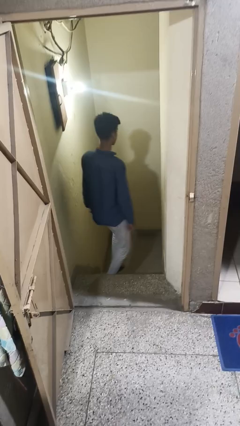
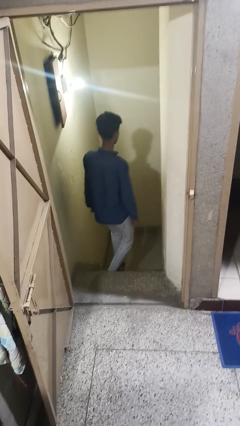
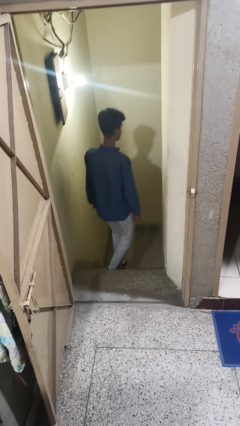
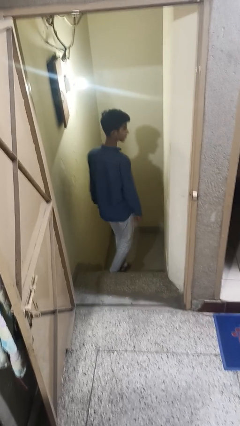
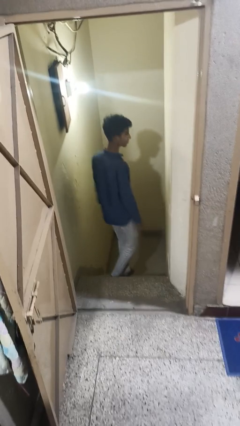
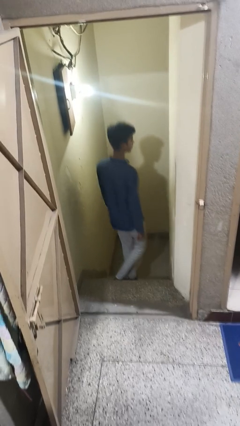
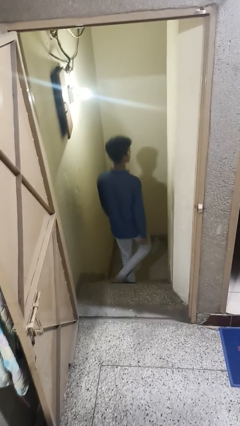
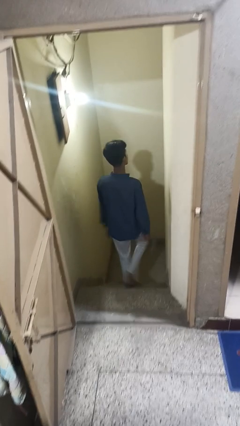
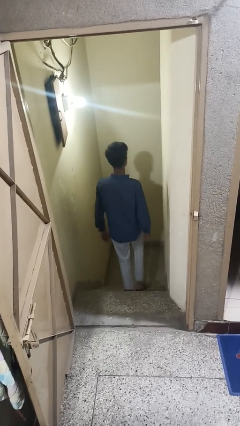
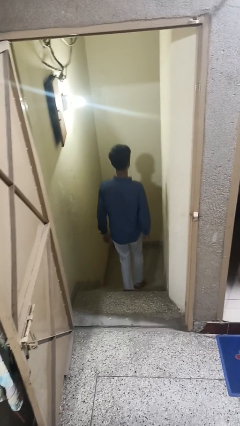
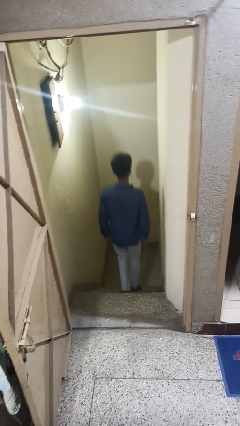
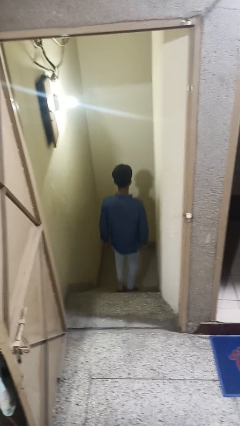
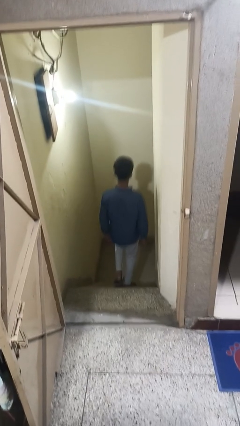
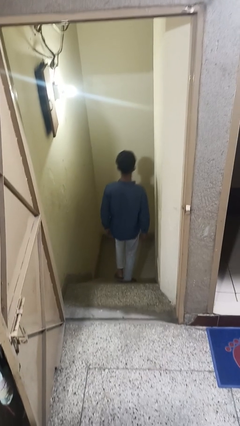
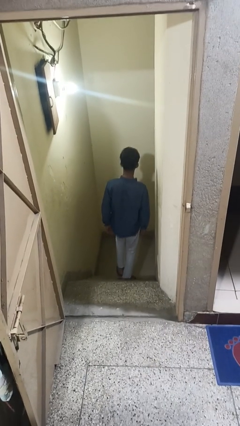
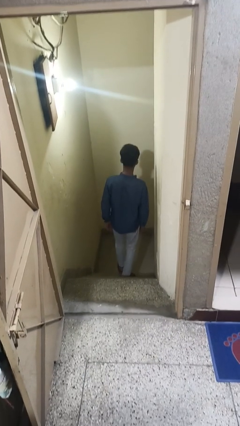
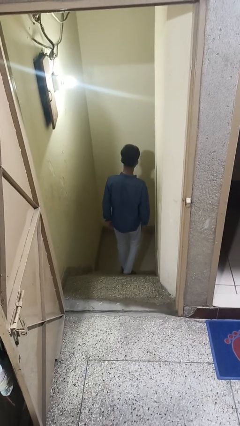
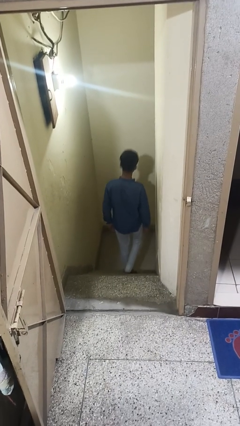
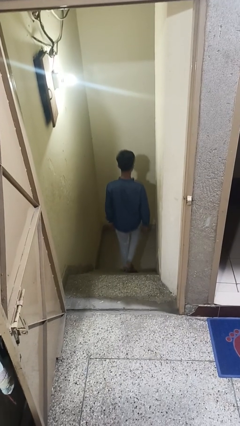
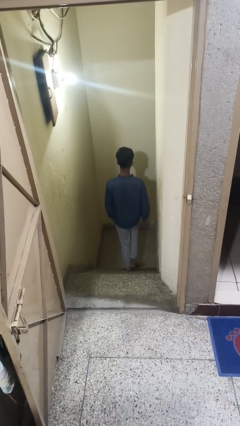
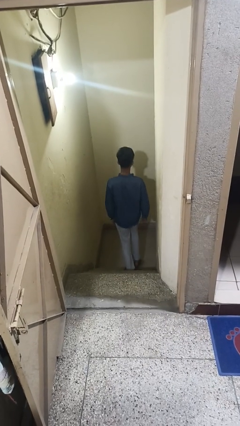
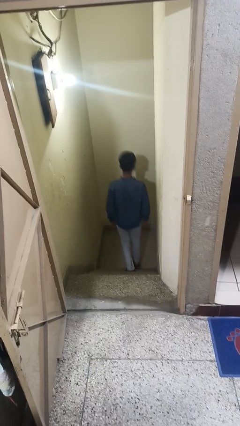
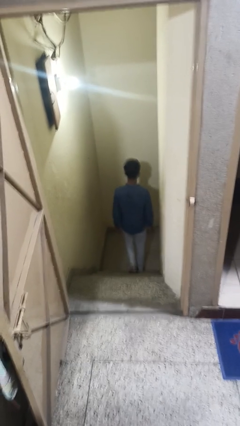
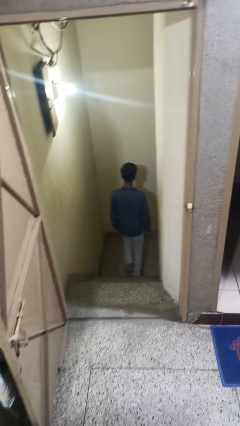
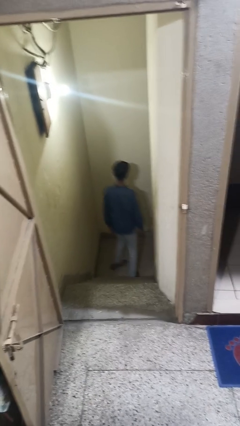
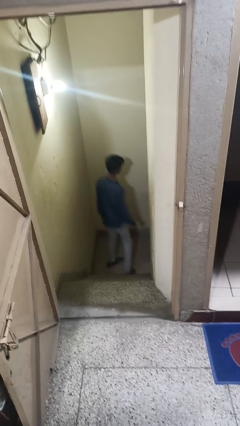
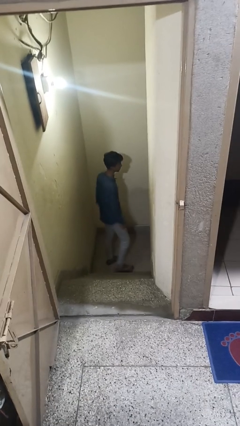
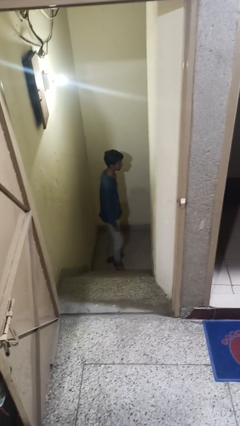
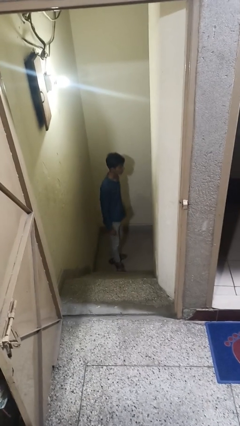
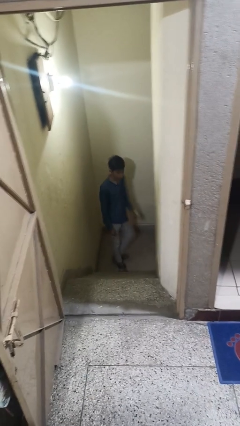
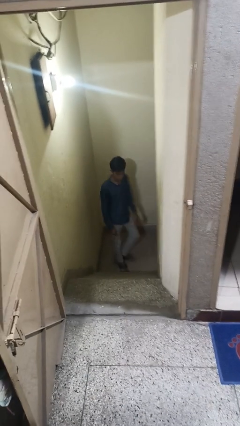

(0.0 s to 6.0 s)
person climbs down stairs

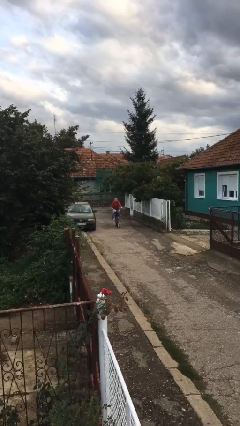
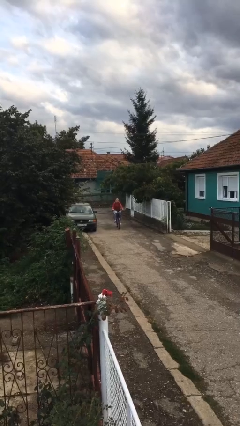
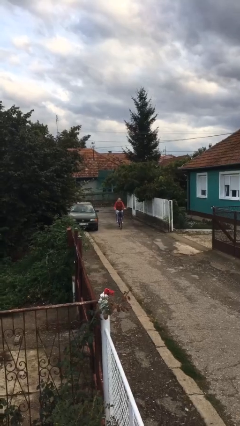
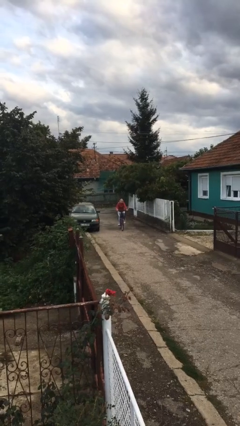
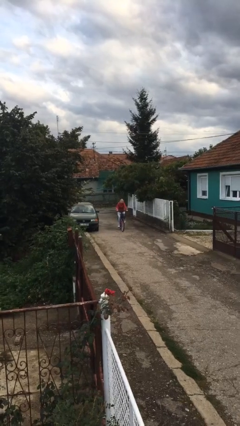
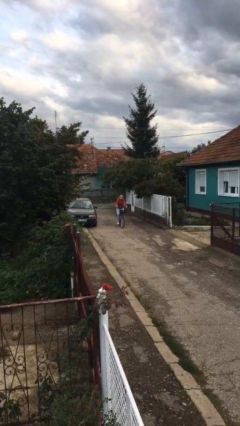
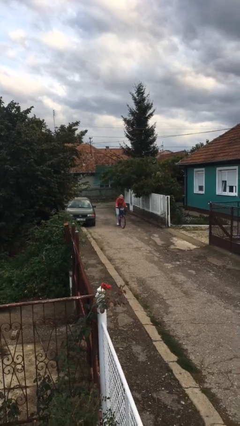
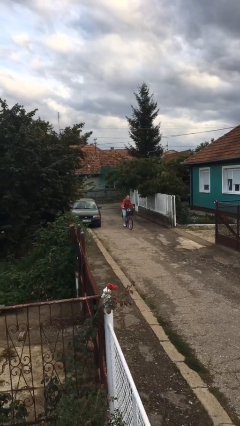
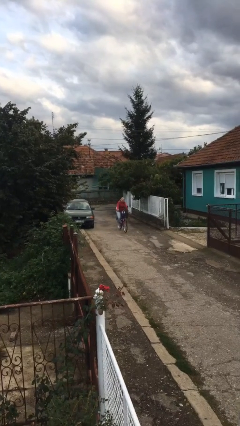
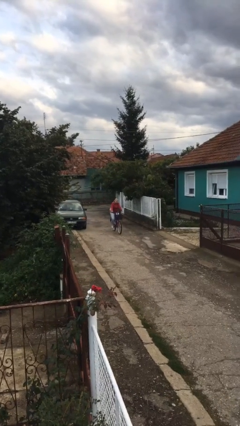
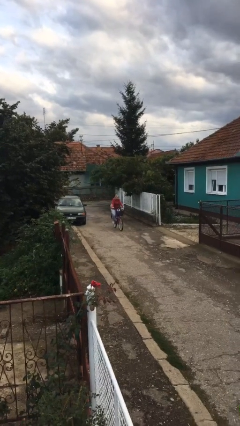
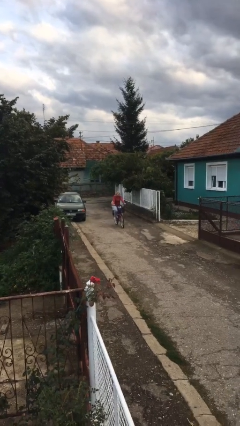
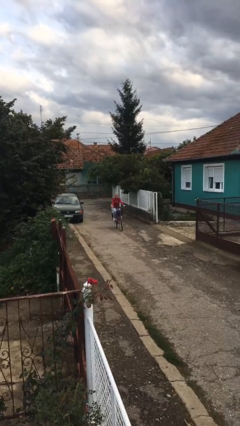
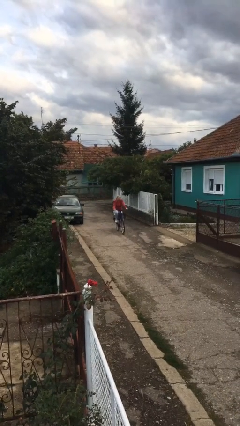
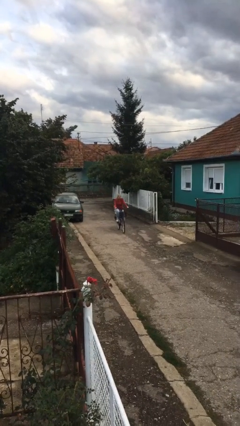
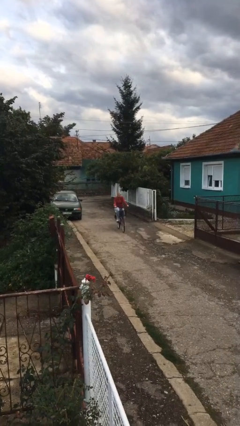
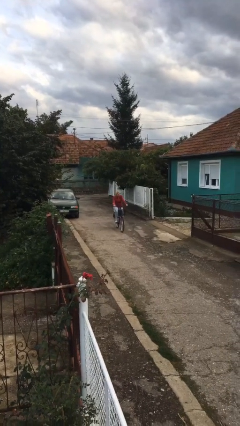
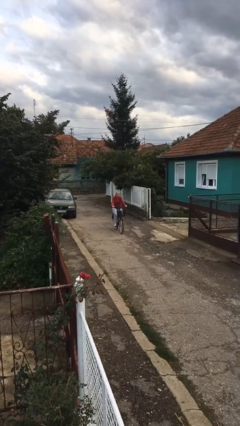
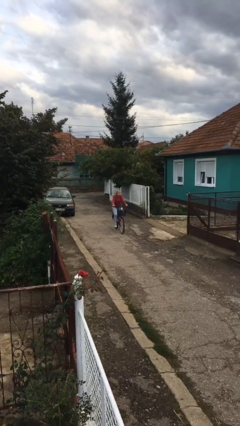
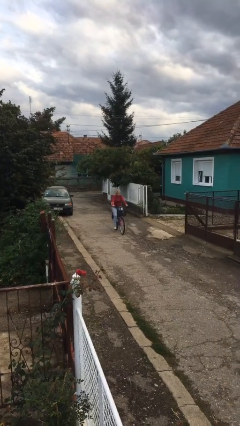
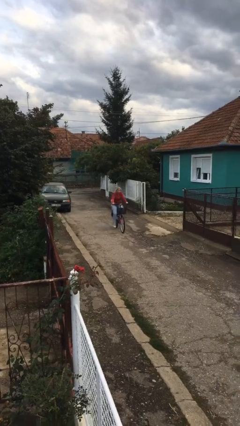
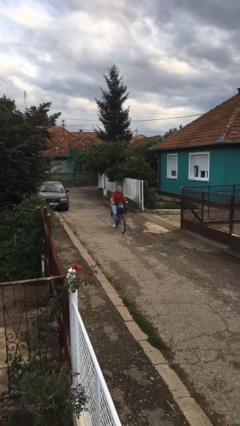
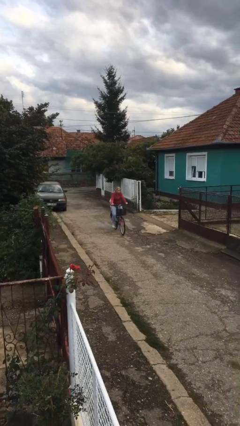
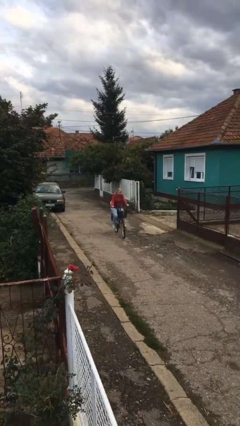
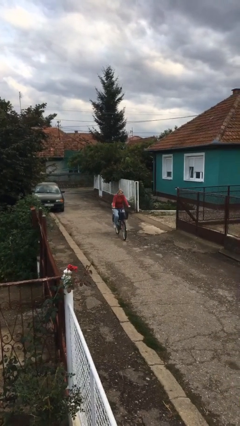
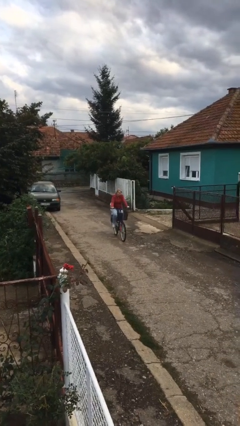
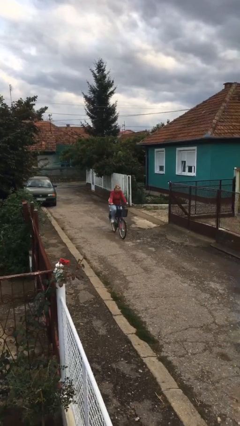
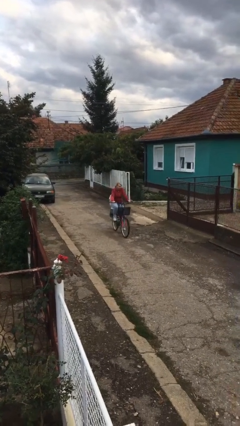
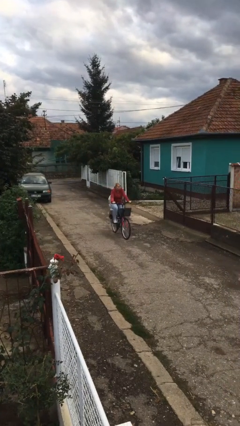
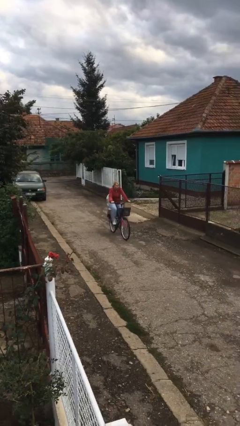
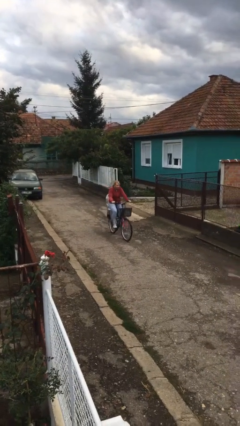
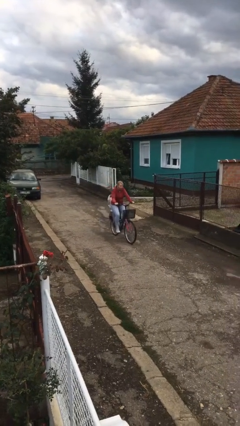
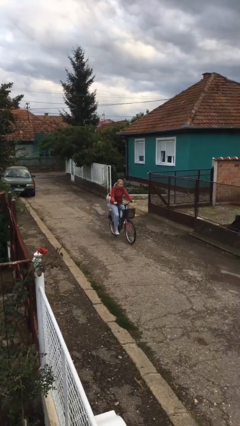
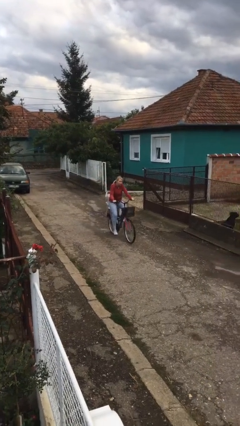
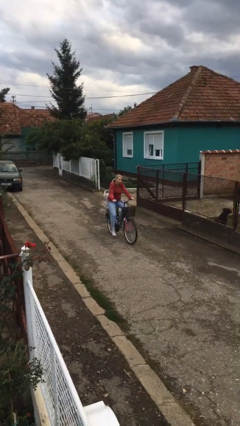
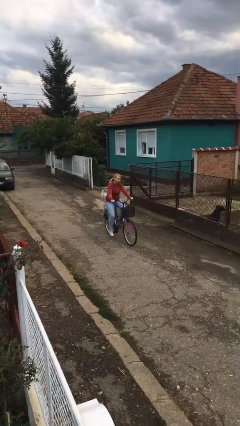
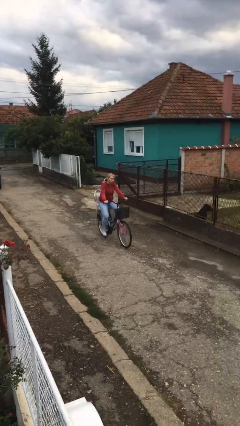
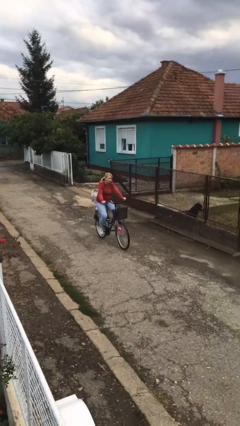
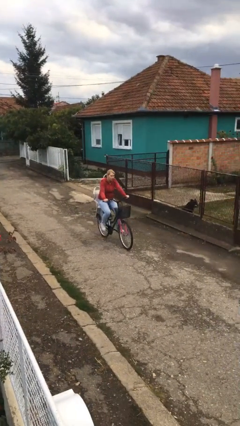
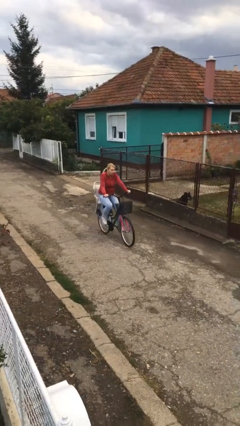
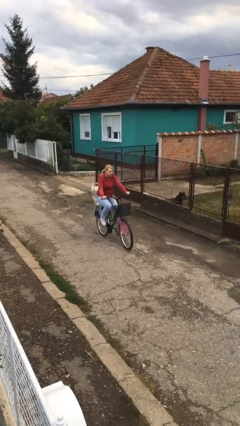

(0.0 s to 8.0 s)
person rides bicycle

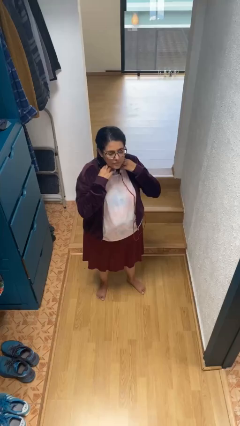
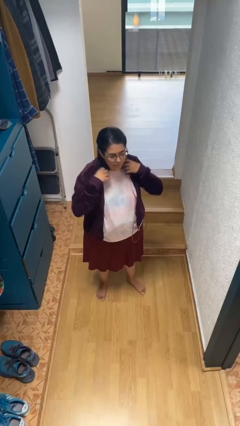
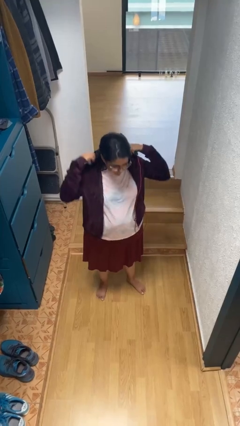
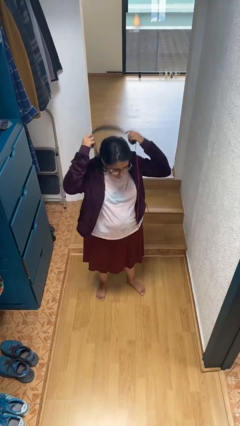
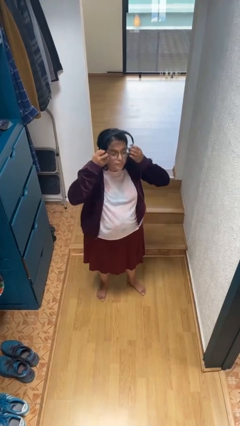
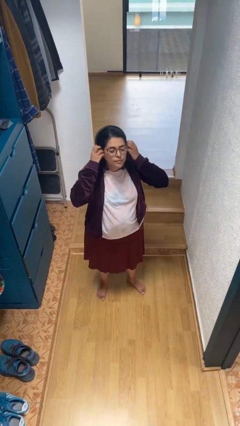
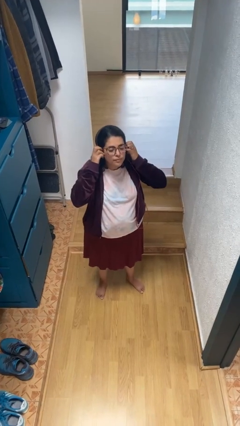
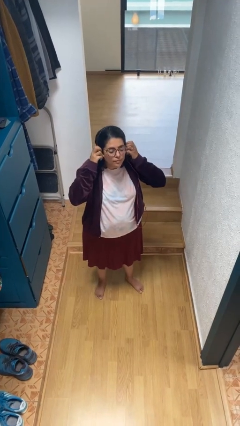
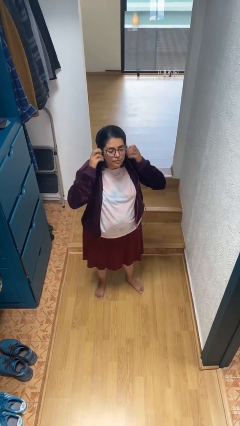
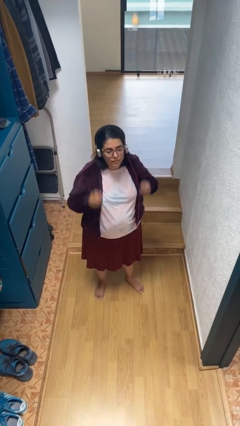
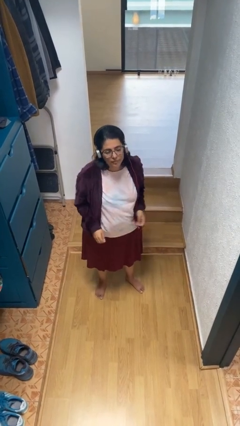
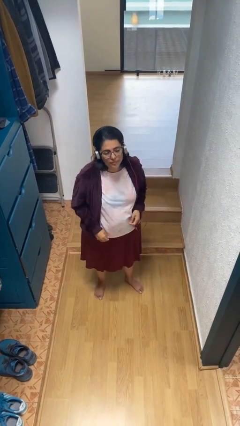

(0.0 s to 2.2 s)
person puts on headphones

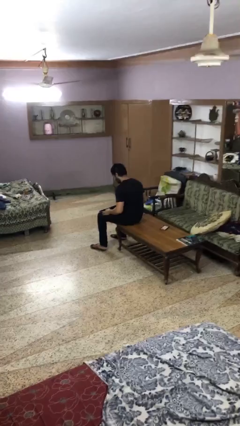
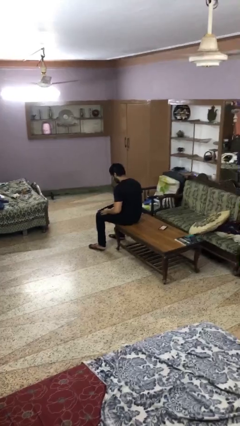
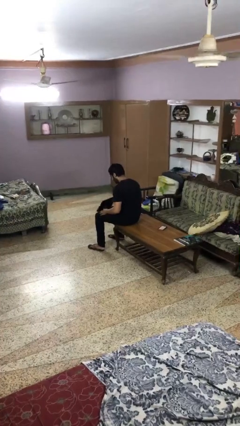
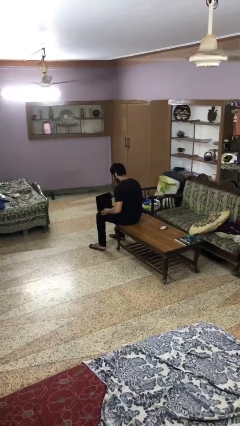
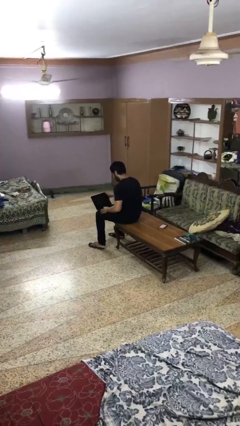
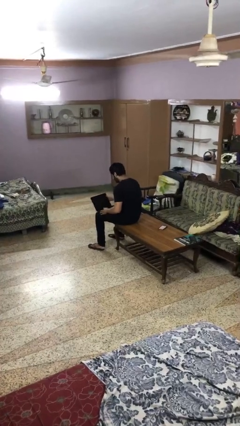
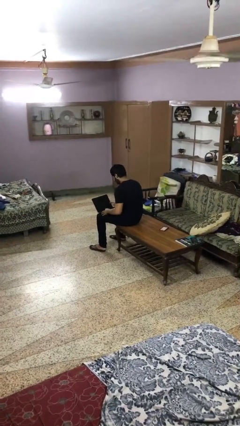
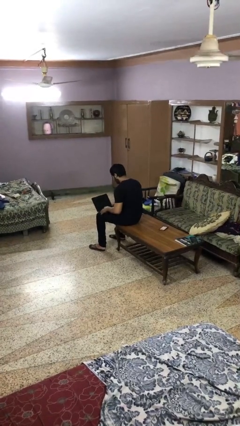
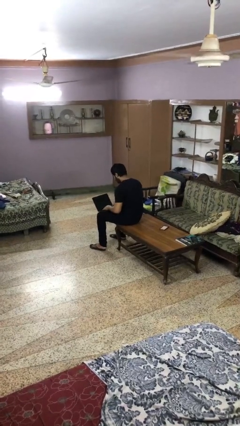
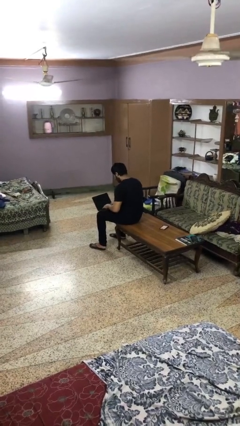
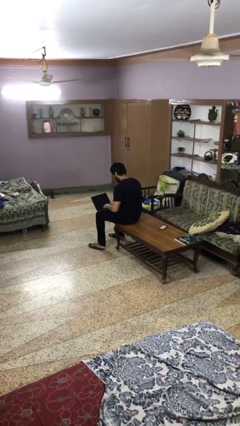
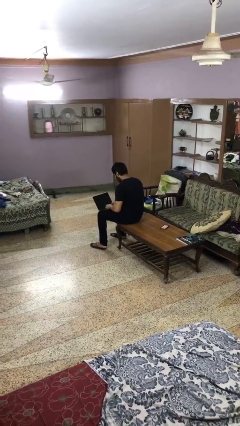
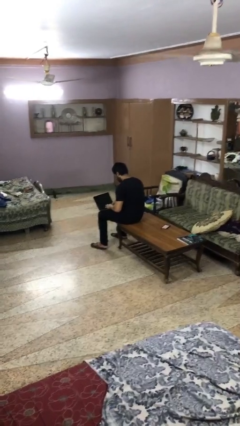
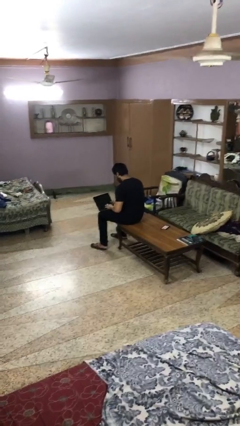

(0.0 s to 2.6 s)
person opens laptop
